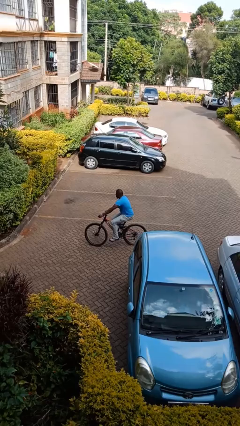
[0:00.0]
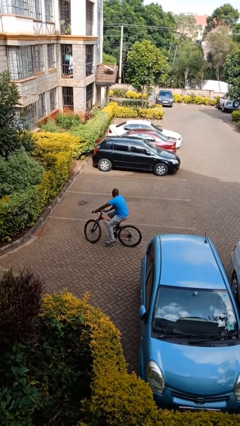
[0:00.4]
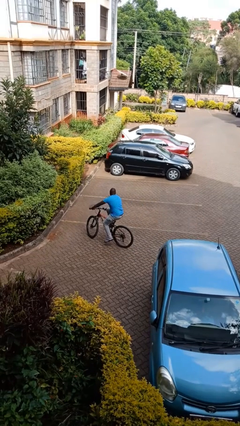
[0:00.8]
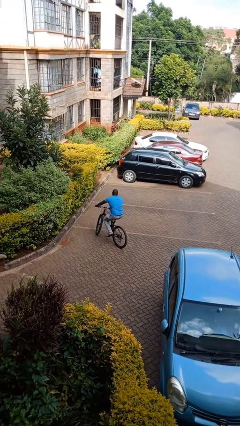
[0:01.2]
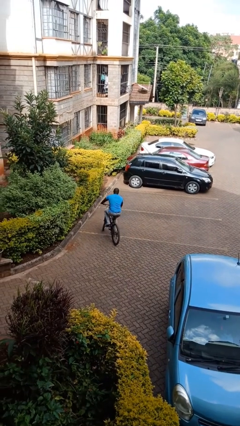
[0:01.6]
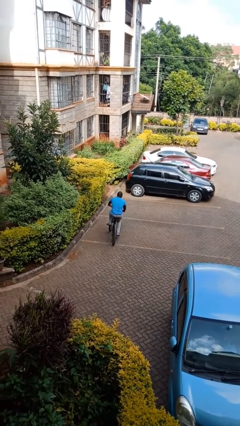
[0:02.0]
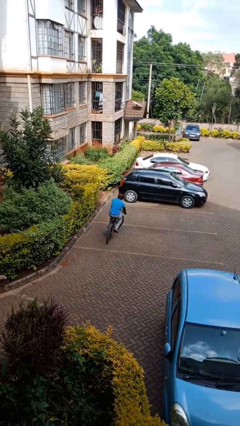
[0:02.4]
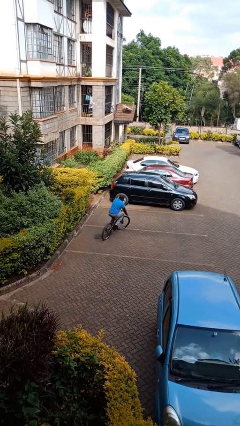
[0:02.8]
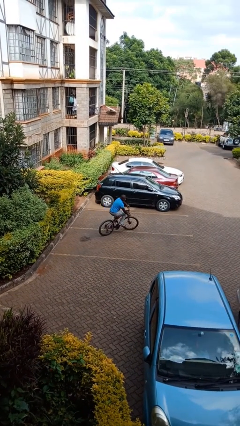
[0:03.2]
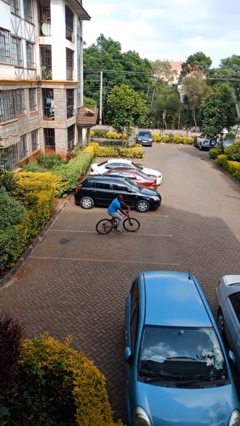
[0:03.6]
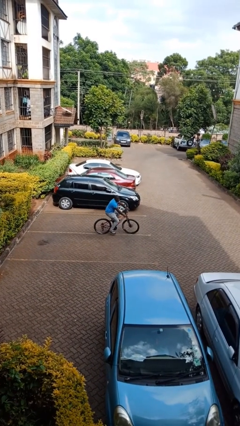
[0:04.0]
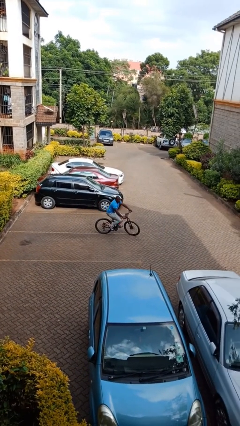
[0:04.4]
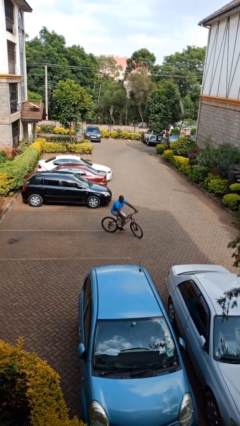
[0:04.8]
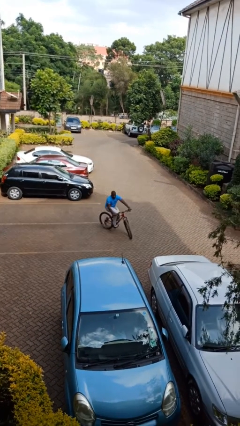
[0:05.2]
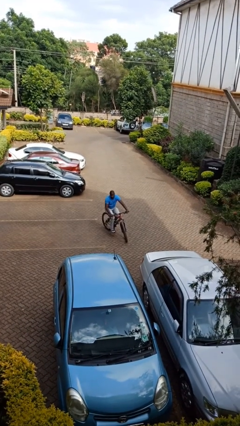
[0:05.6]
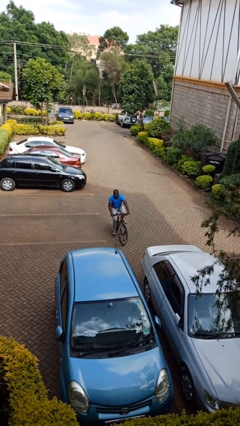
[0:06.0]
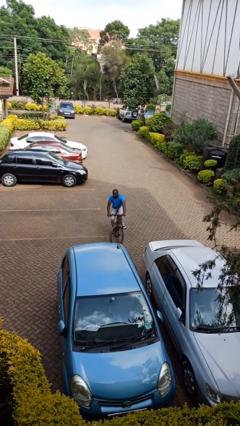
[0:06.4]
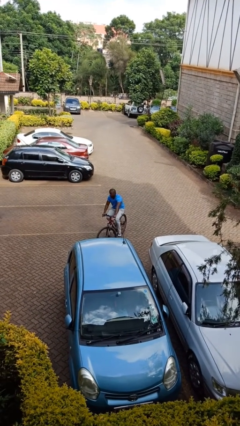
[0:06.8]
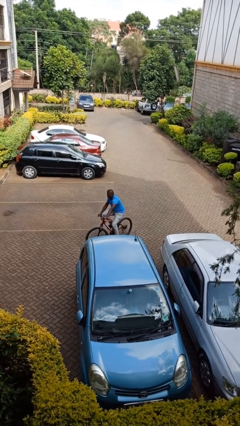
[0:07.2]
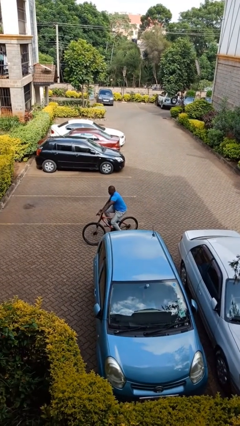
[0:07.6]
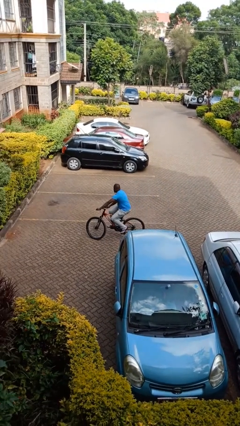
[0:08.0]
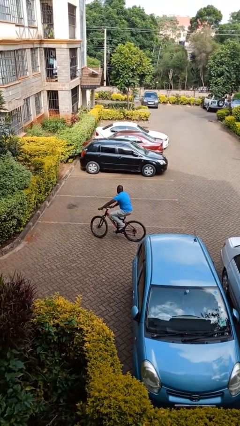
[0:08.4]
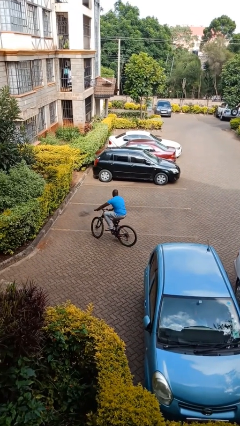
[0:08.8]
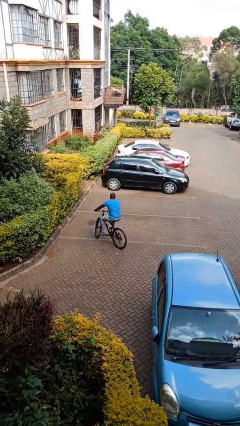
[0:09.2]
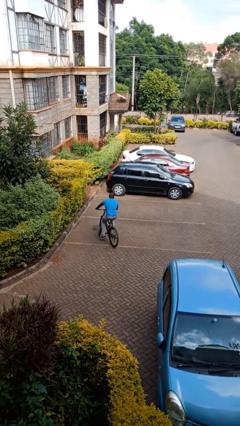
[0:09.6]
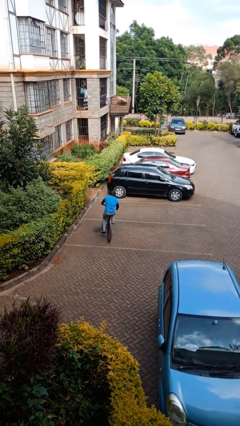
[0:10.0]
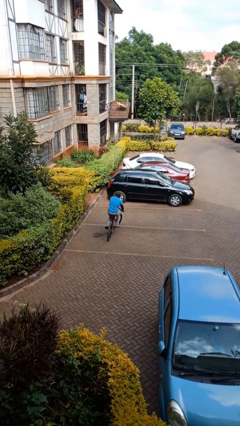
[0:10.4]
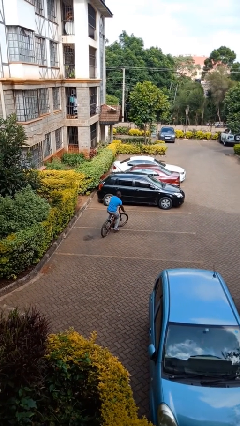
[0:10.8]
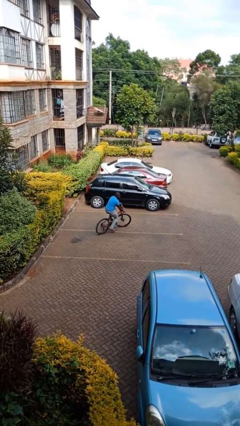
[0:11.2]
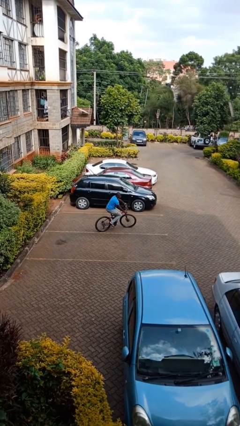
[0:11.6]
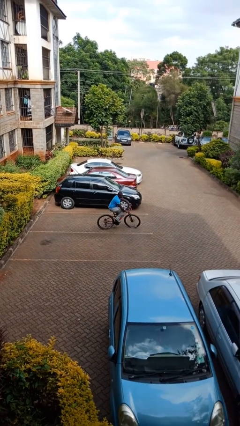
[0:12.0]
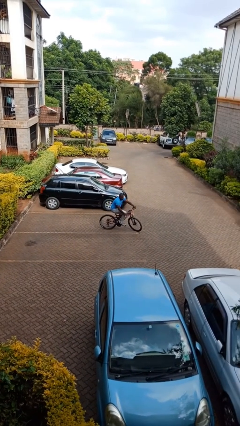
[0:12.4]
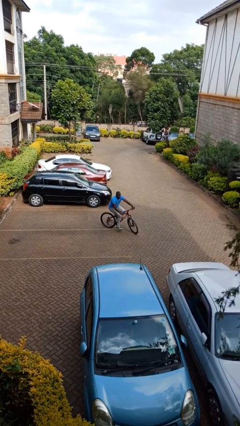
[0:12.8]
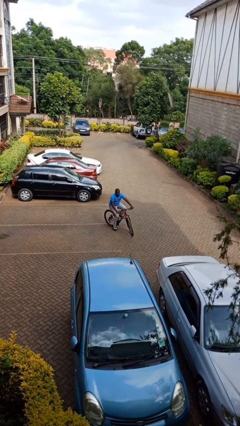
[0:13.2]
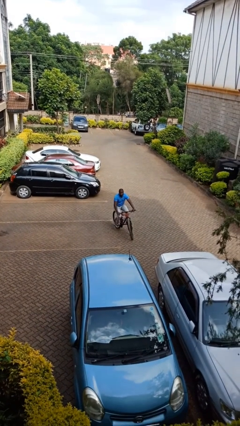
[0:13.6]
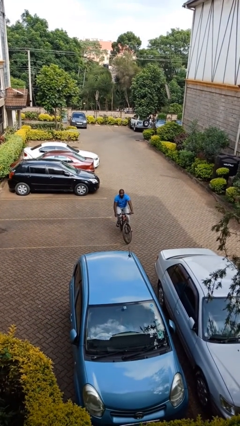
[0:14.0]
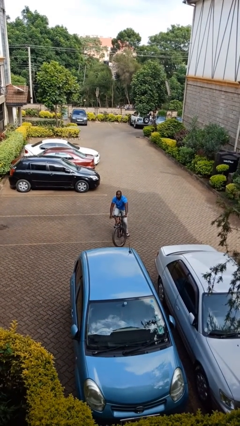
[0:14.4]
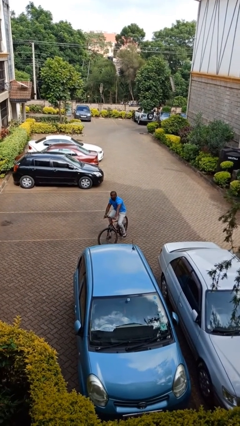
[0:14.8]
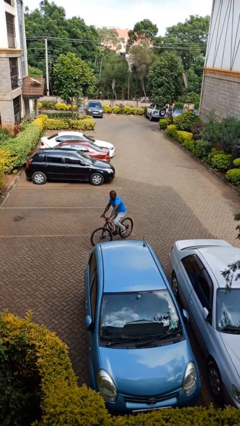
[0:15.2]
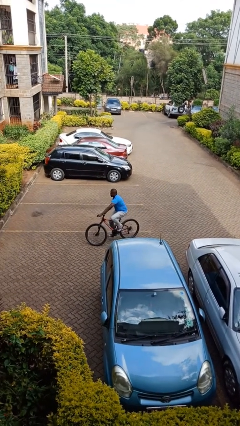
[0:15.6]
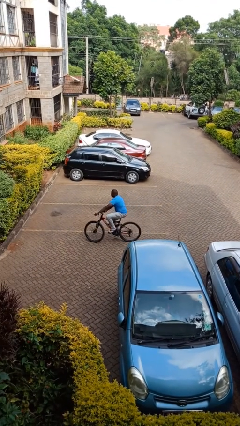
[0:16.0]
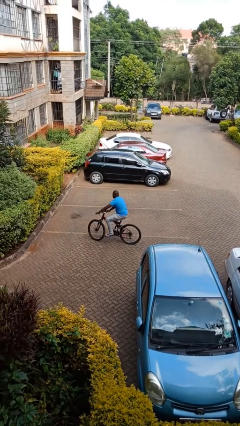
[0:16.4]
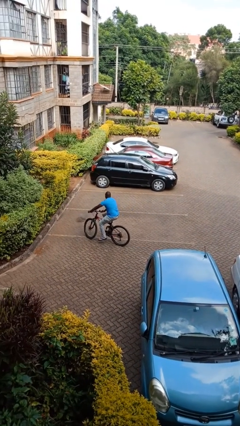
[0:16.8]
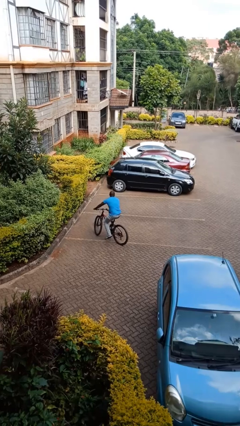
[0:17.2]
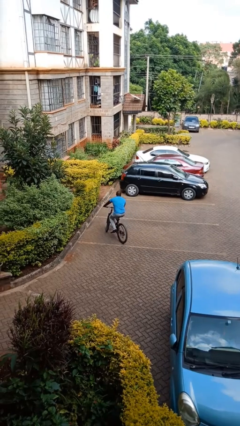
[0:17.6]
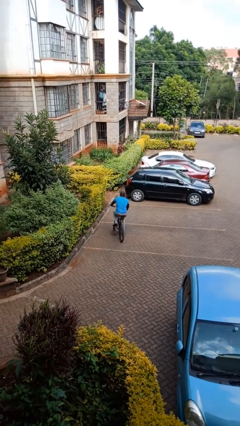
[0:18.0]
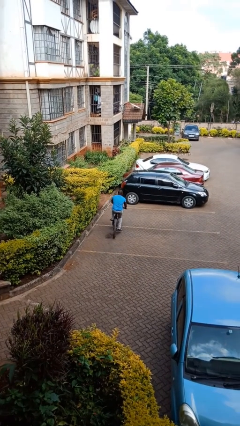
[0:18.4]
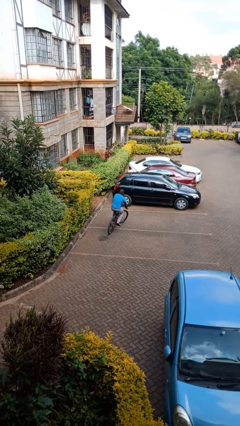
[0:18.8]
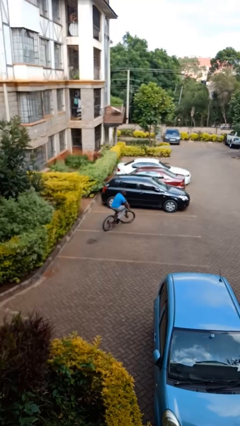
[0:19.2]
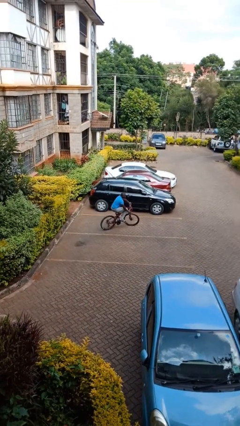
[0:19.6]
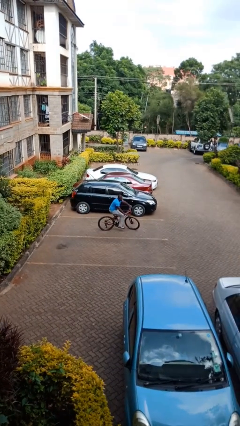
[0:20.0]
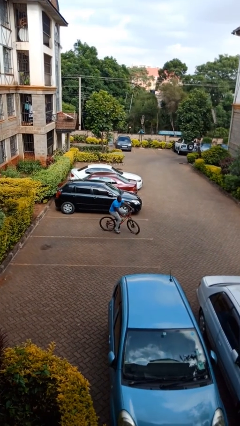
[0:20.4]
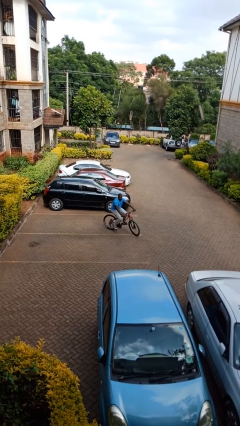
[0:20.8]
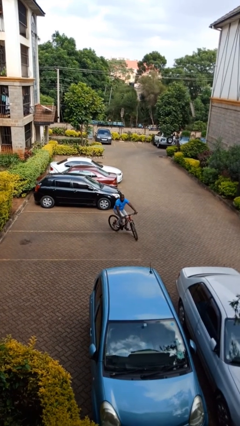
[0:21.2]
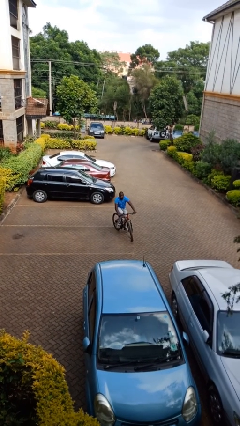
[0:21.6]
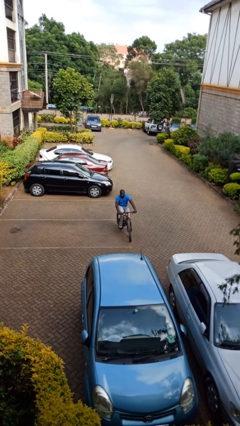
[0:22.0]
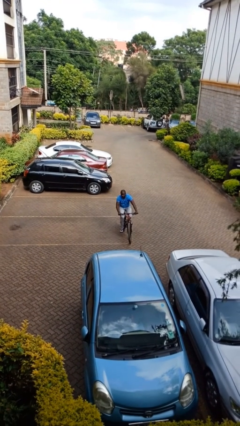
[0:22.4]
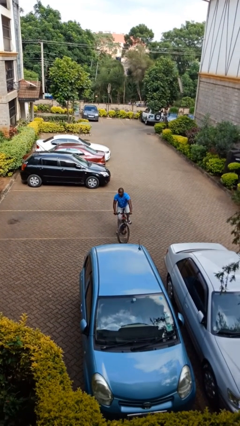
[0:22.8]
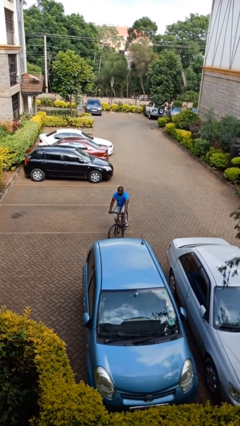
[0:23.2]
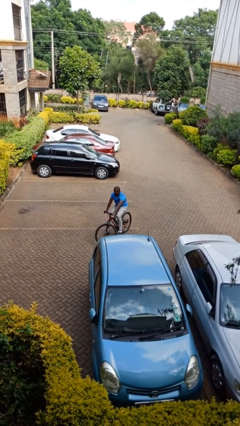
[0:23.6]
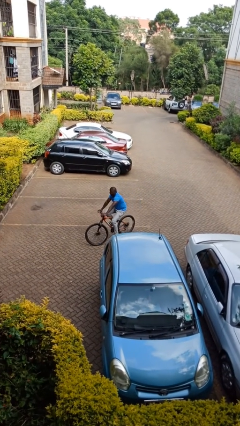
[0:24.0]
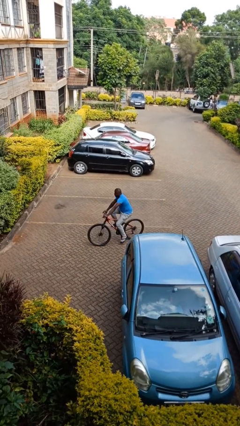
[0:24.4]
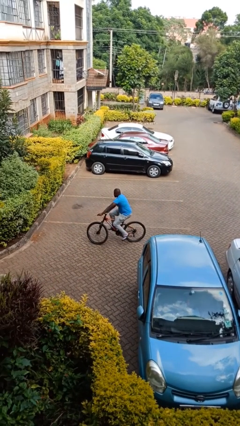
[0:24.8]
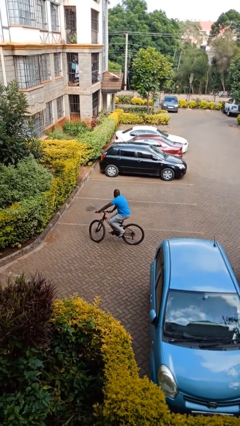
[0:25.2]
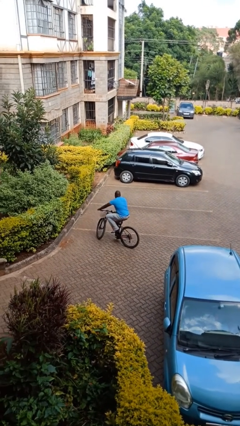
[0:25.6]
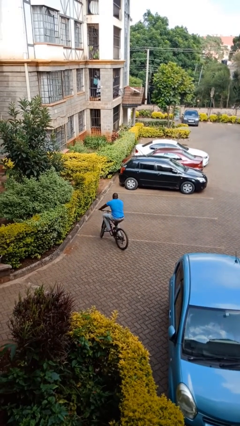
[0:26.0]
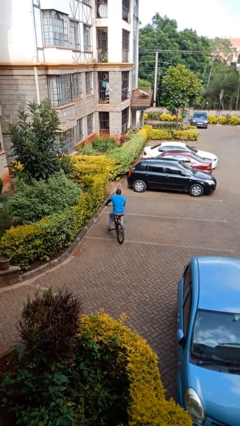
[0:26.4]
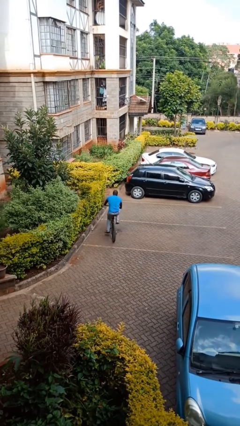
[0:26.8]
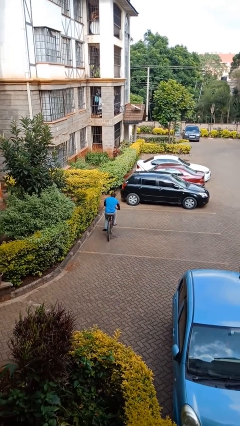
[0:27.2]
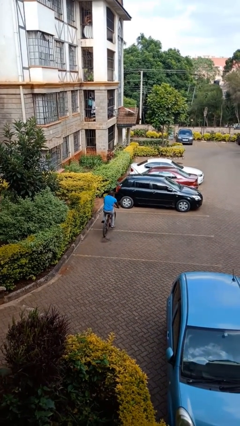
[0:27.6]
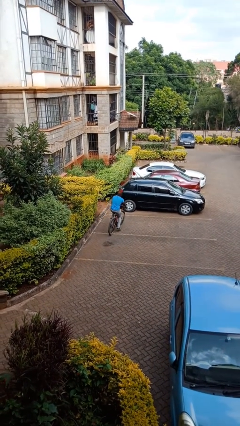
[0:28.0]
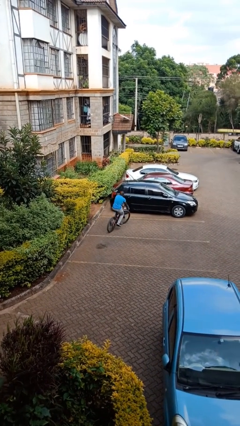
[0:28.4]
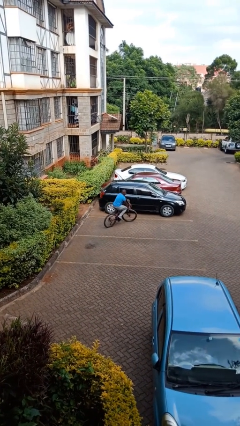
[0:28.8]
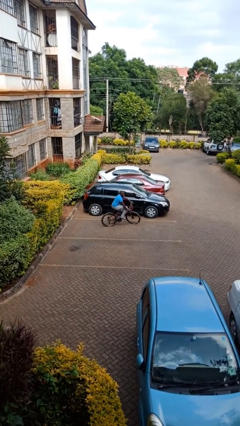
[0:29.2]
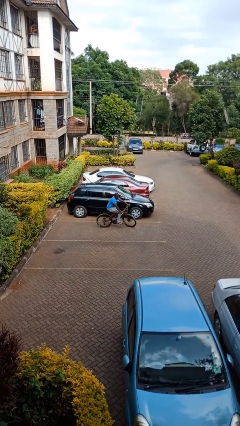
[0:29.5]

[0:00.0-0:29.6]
person rides bicycle

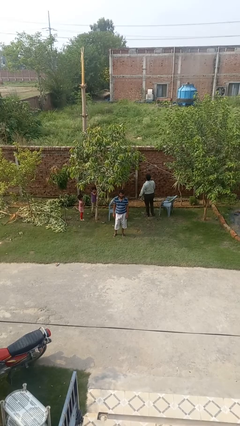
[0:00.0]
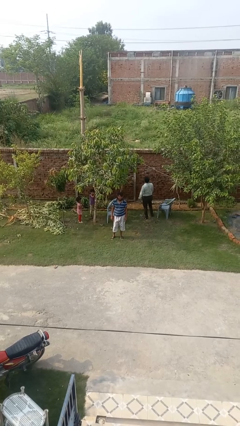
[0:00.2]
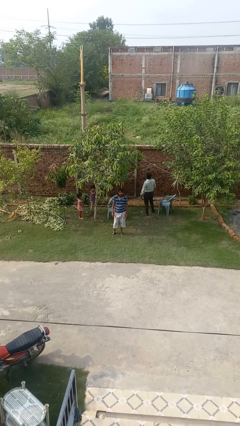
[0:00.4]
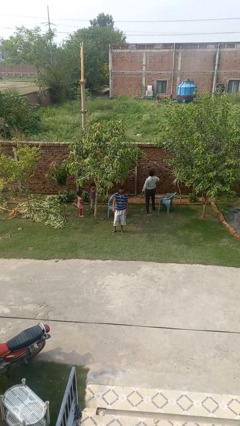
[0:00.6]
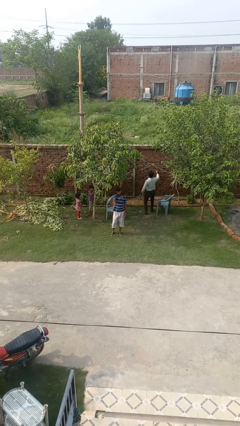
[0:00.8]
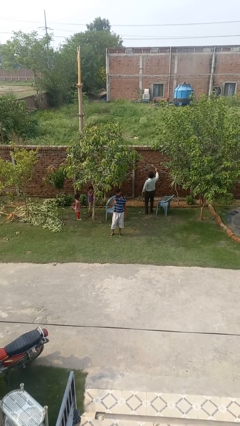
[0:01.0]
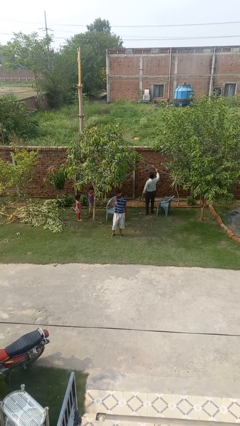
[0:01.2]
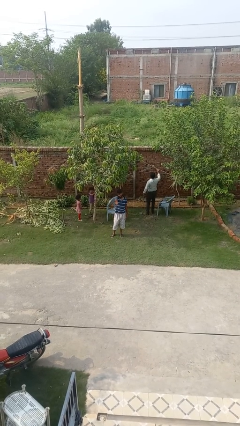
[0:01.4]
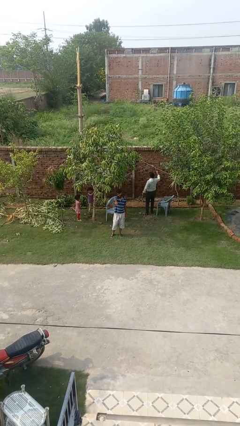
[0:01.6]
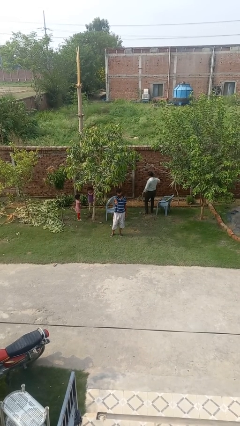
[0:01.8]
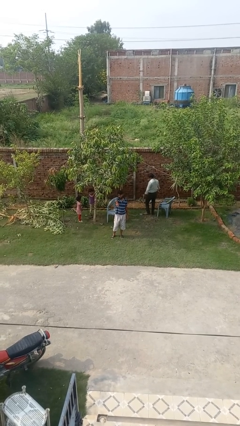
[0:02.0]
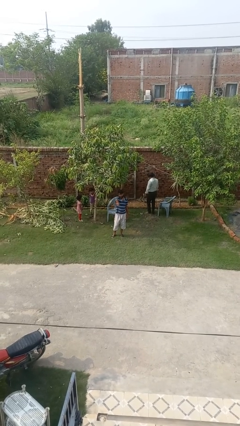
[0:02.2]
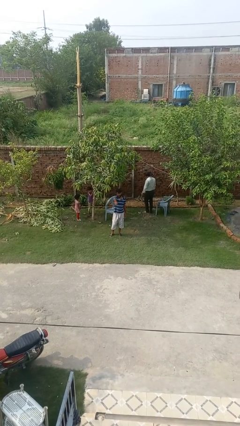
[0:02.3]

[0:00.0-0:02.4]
person points at person

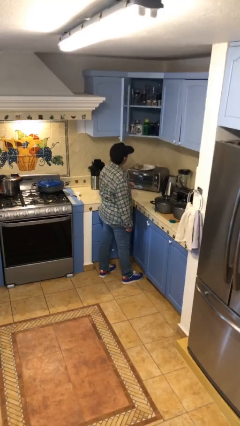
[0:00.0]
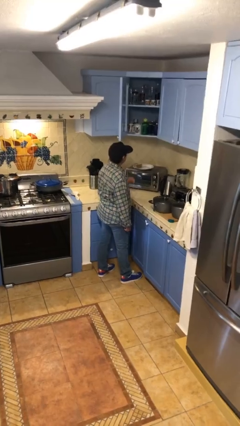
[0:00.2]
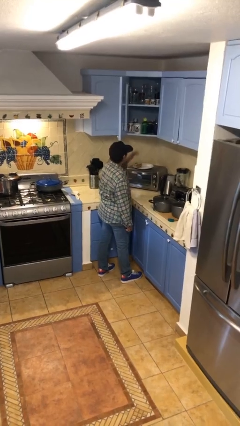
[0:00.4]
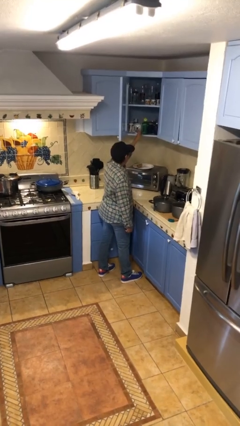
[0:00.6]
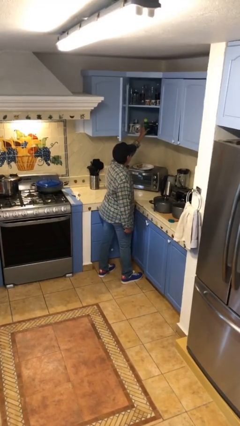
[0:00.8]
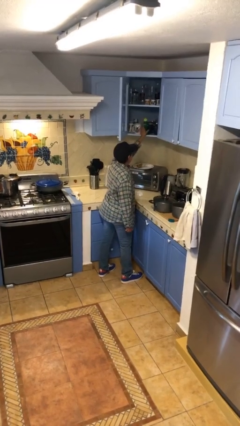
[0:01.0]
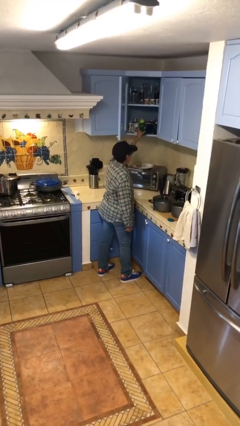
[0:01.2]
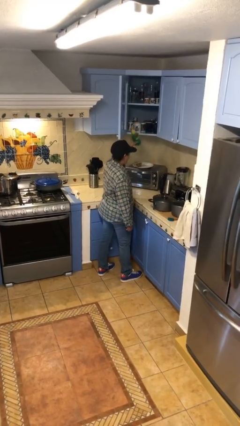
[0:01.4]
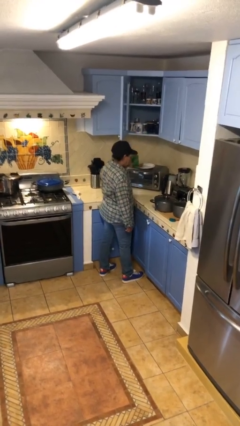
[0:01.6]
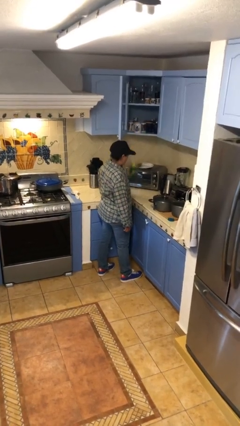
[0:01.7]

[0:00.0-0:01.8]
person picks up object from cabinet
